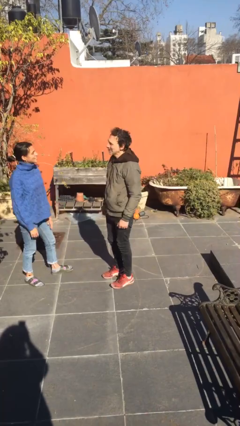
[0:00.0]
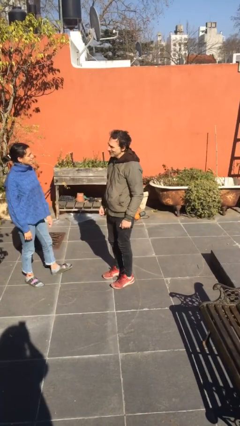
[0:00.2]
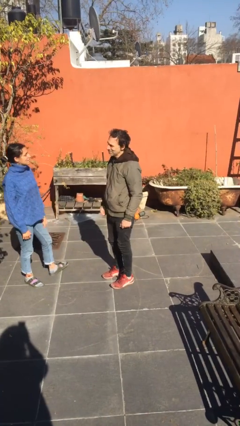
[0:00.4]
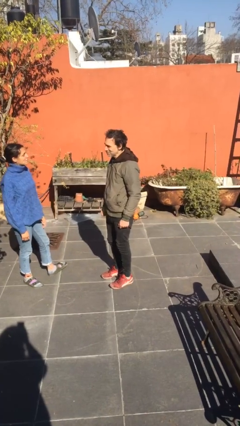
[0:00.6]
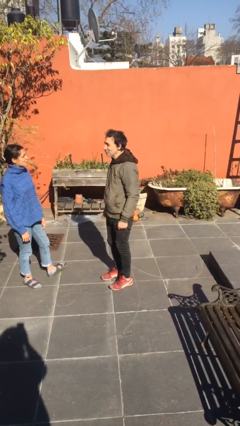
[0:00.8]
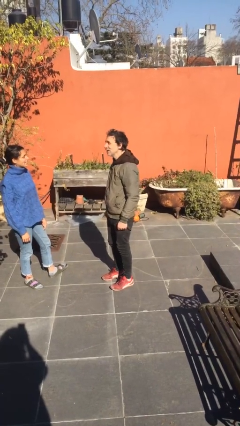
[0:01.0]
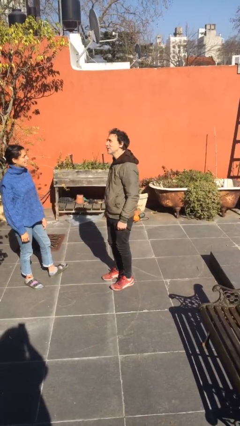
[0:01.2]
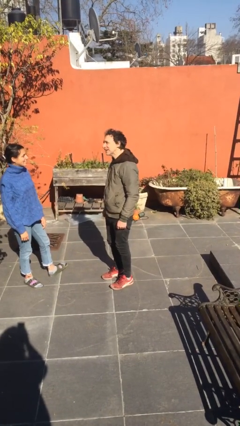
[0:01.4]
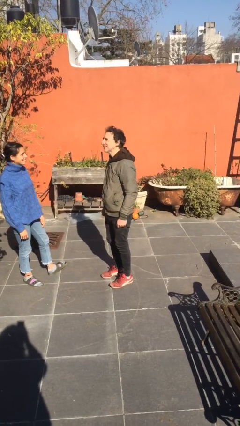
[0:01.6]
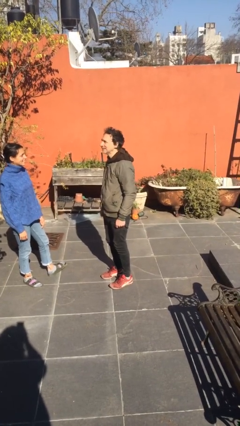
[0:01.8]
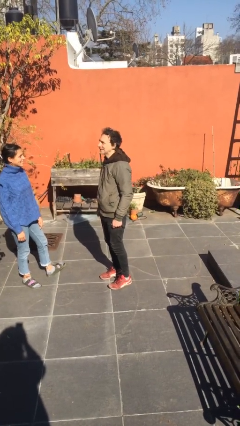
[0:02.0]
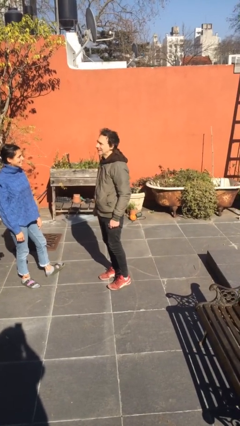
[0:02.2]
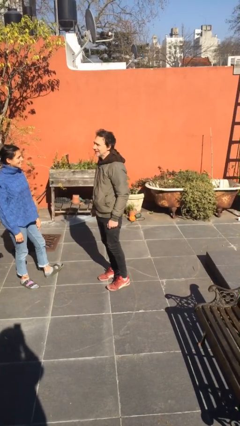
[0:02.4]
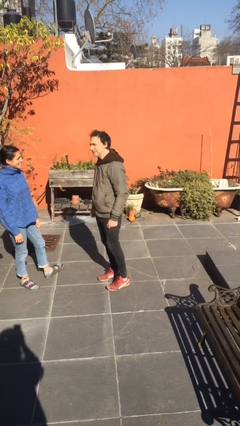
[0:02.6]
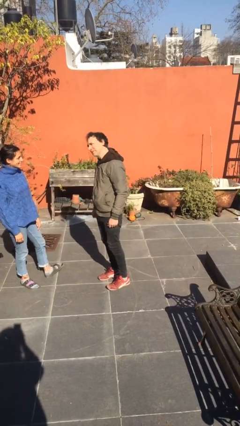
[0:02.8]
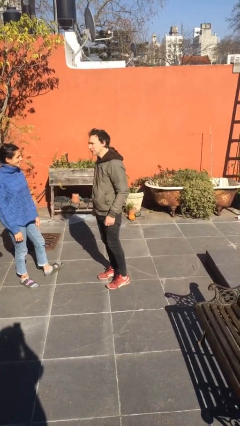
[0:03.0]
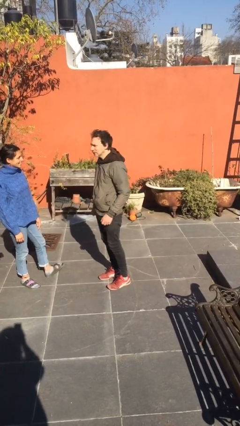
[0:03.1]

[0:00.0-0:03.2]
person talks to person

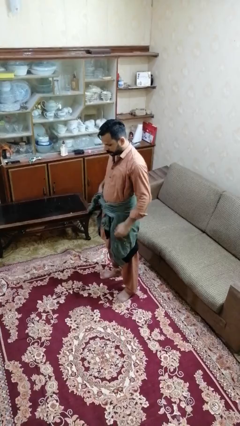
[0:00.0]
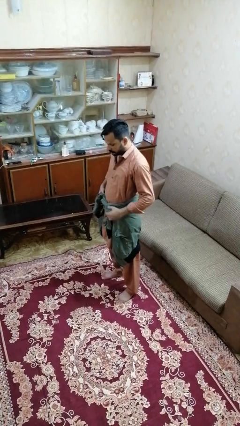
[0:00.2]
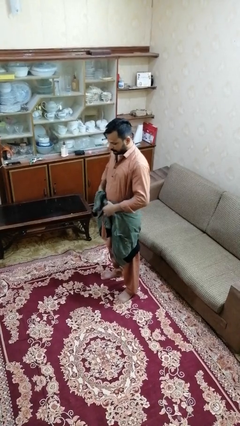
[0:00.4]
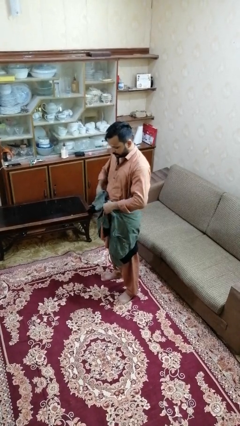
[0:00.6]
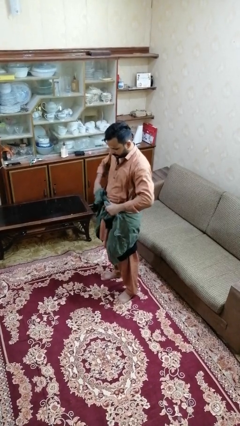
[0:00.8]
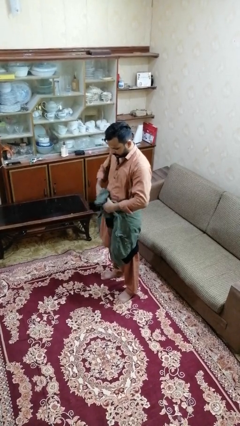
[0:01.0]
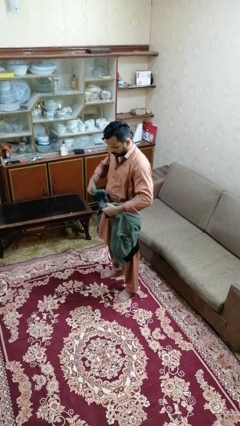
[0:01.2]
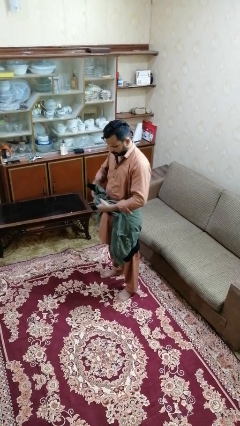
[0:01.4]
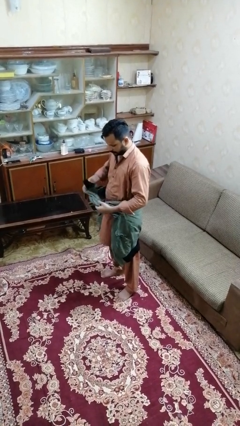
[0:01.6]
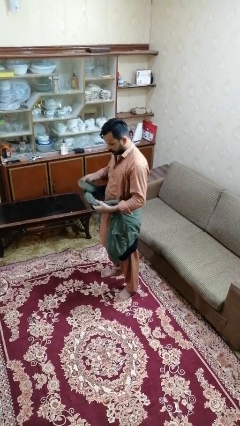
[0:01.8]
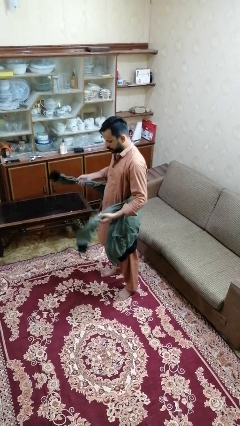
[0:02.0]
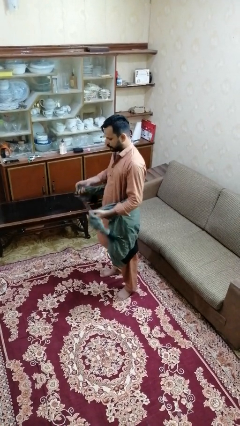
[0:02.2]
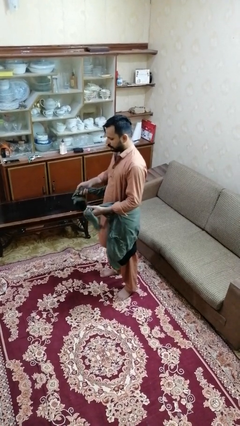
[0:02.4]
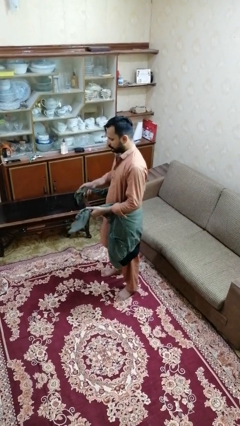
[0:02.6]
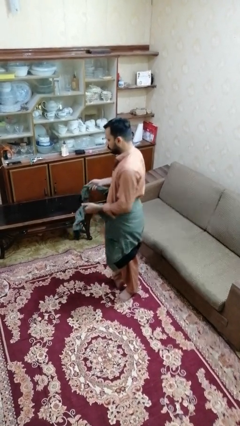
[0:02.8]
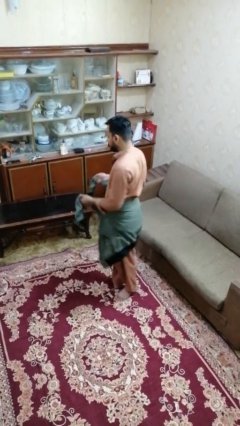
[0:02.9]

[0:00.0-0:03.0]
person unties jacket around waist

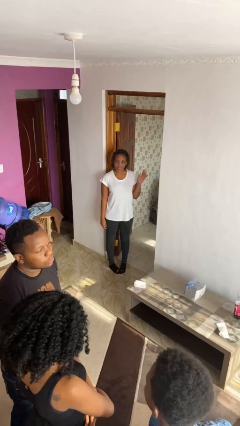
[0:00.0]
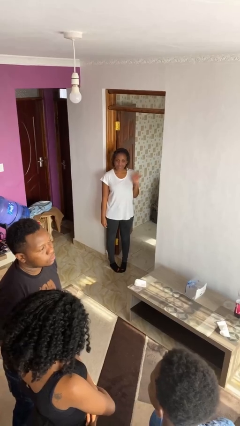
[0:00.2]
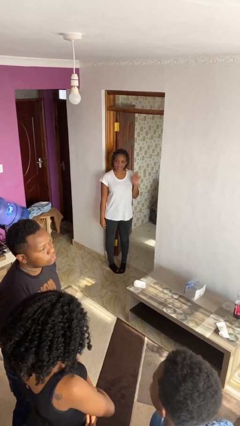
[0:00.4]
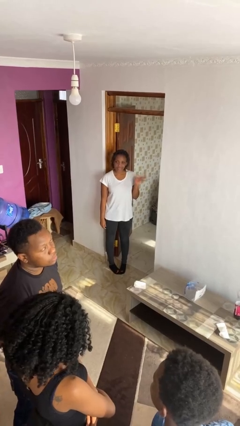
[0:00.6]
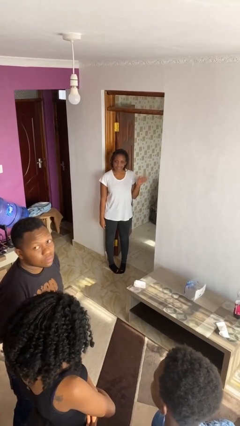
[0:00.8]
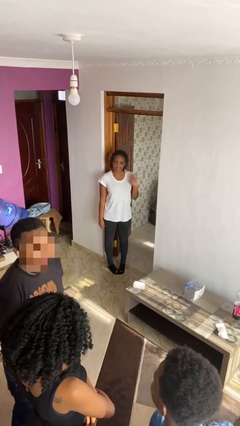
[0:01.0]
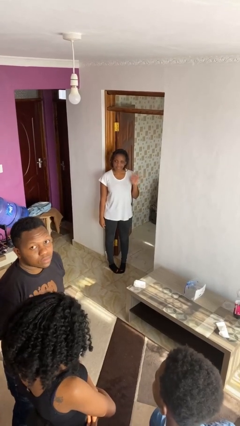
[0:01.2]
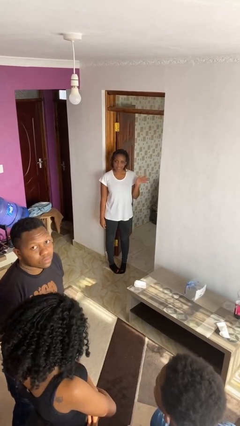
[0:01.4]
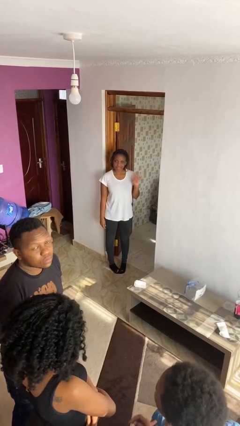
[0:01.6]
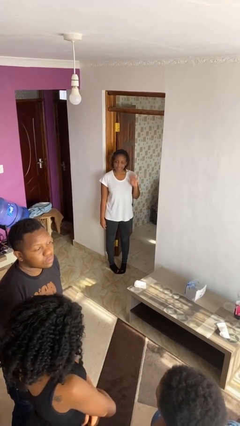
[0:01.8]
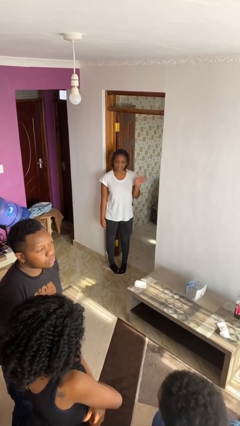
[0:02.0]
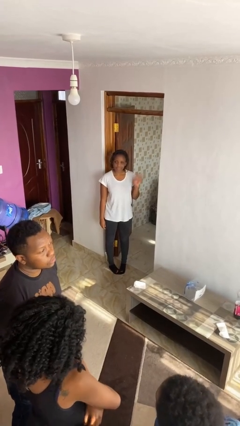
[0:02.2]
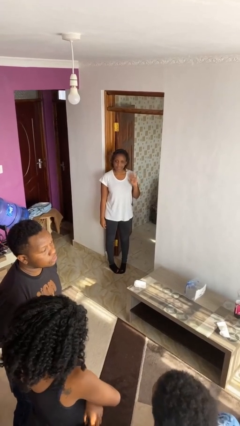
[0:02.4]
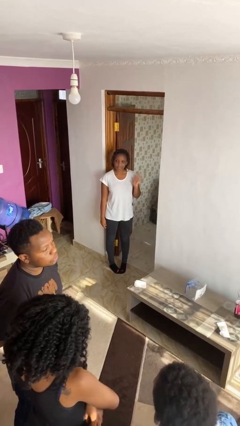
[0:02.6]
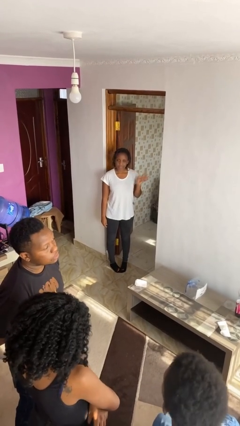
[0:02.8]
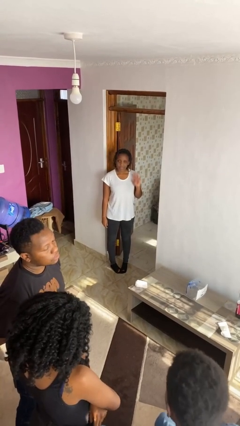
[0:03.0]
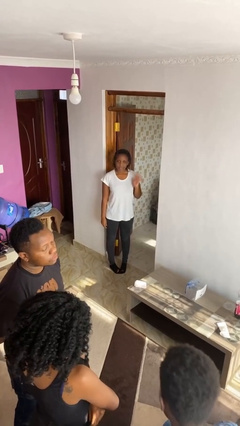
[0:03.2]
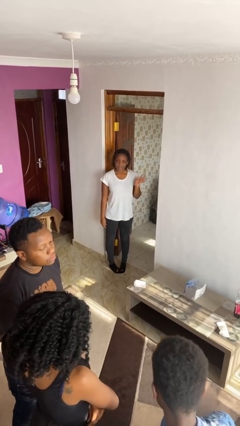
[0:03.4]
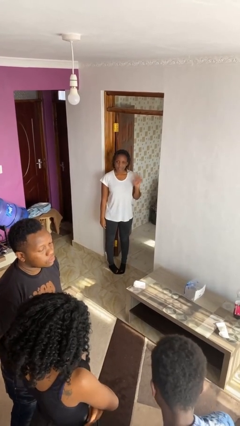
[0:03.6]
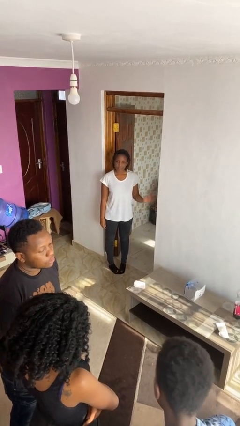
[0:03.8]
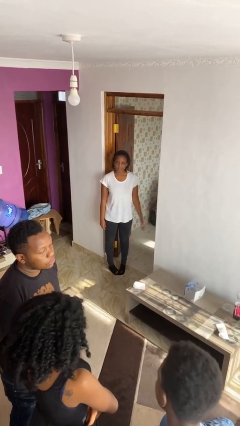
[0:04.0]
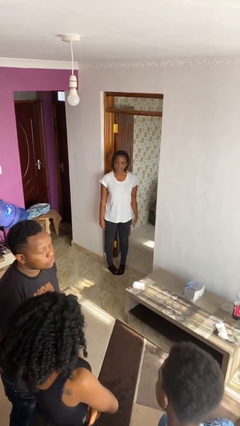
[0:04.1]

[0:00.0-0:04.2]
person waves at person

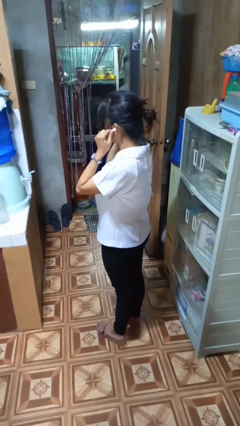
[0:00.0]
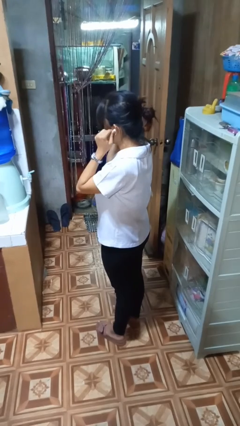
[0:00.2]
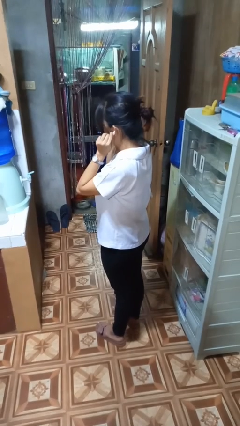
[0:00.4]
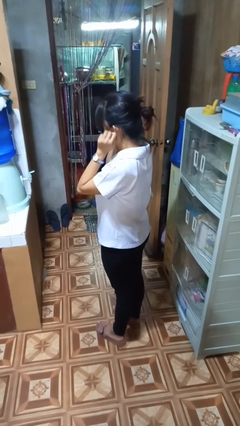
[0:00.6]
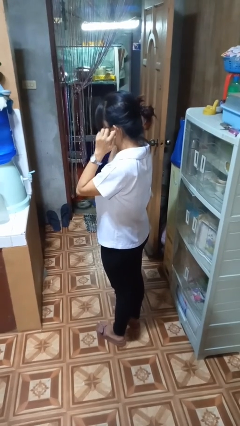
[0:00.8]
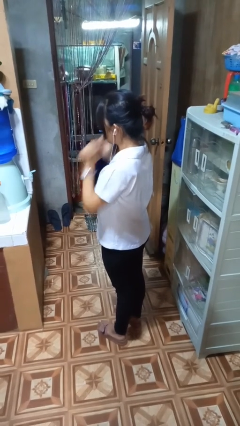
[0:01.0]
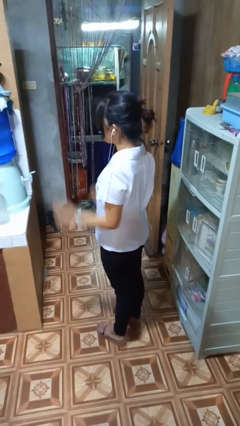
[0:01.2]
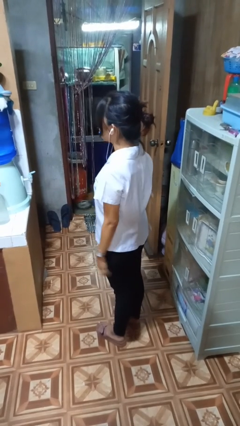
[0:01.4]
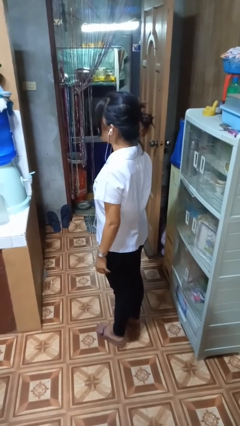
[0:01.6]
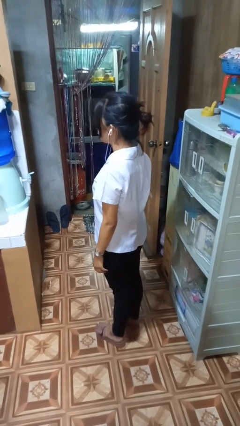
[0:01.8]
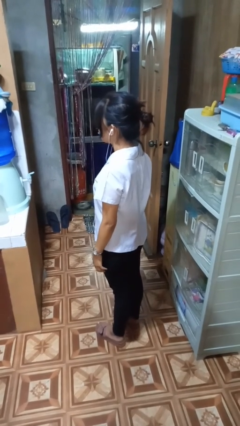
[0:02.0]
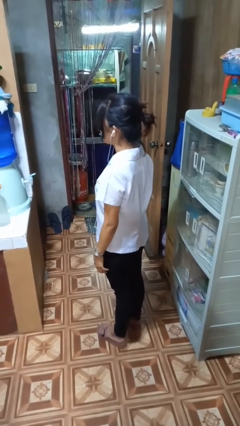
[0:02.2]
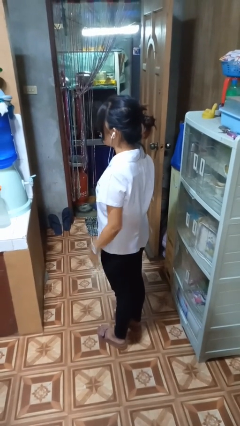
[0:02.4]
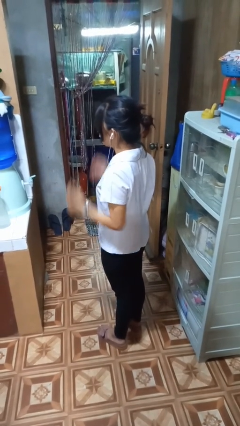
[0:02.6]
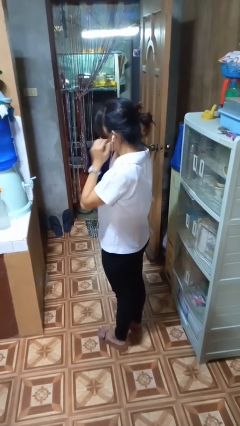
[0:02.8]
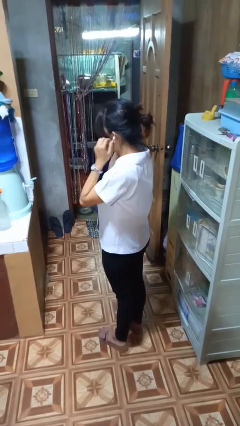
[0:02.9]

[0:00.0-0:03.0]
person puts on headphones

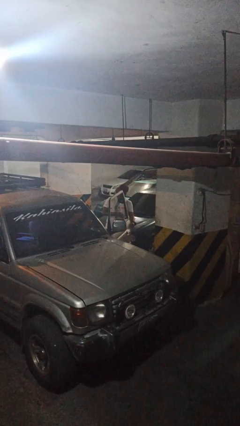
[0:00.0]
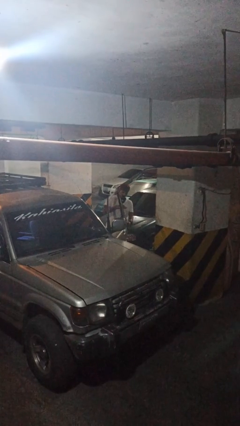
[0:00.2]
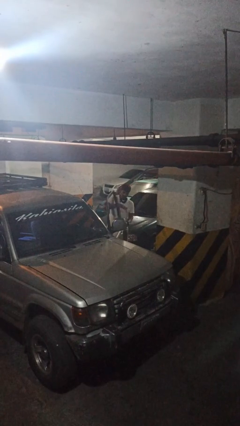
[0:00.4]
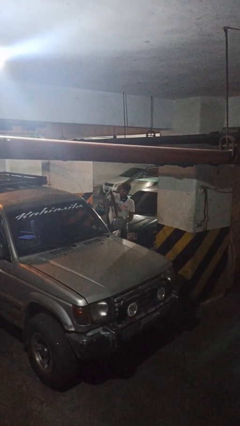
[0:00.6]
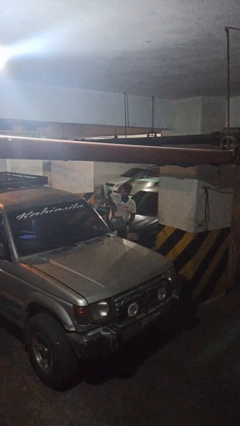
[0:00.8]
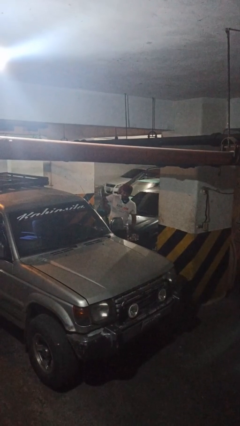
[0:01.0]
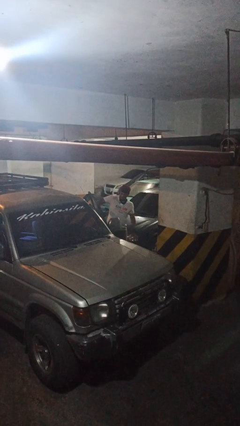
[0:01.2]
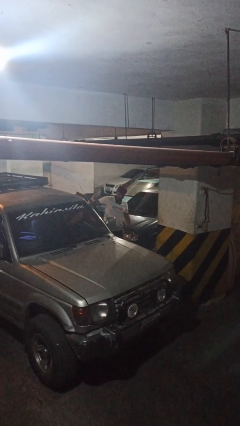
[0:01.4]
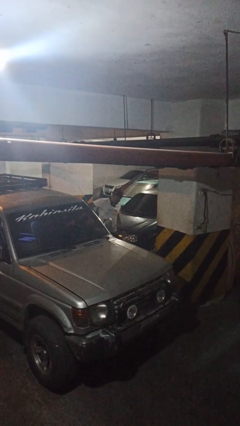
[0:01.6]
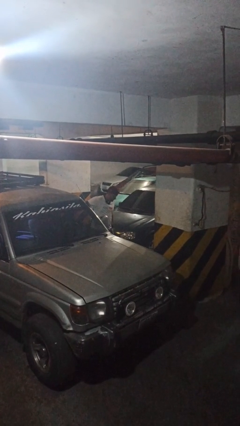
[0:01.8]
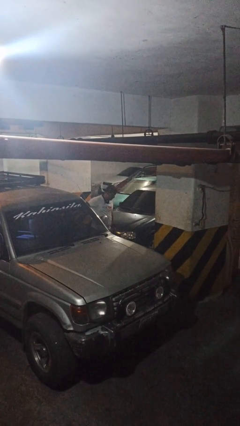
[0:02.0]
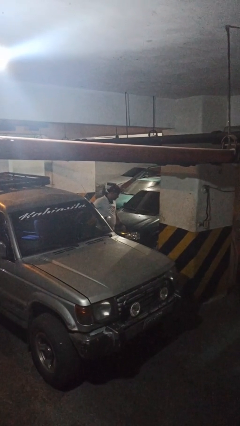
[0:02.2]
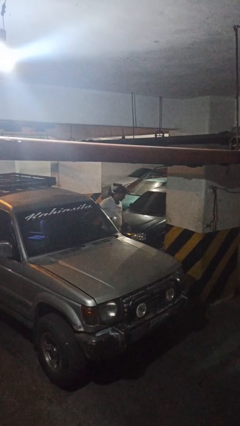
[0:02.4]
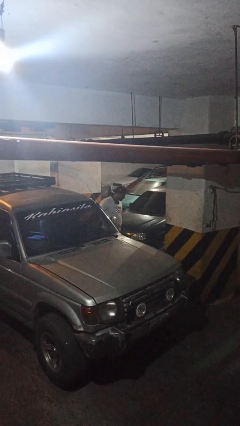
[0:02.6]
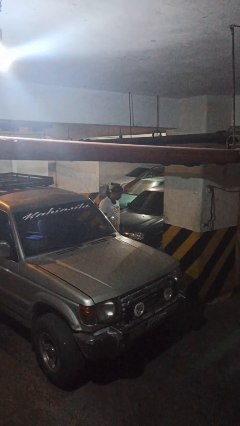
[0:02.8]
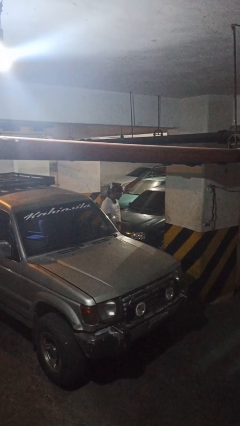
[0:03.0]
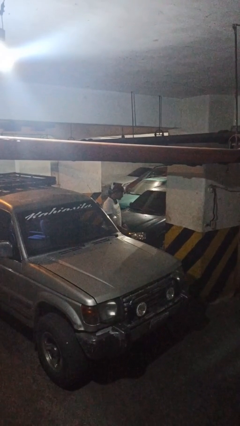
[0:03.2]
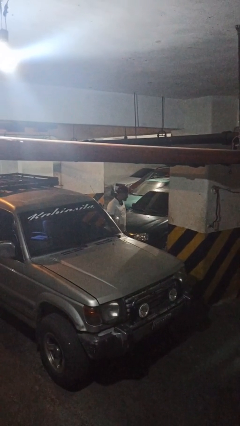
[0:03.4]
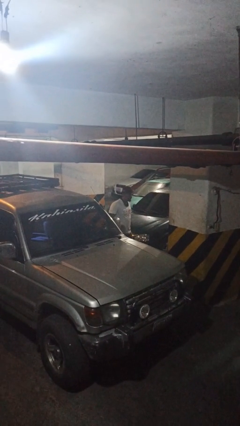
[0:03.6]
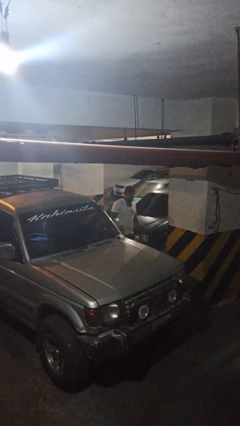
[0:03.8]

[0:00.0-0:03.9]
person closes car door

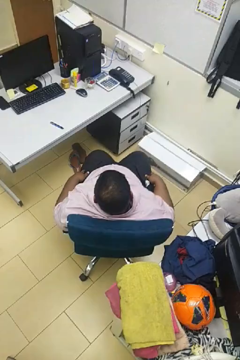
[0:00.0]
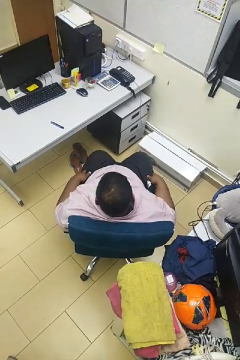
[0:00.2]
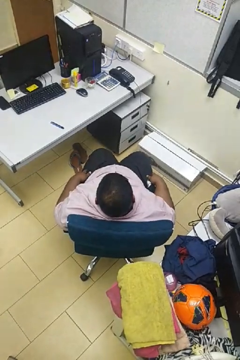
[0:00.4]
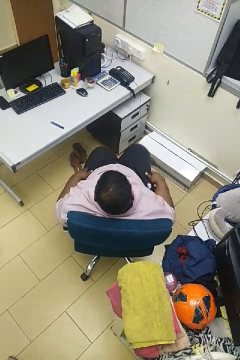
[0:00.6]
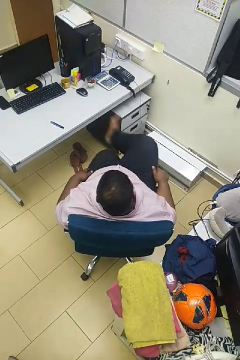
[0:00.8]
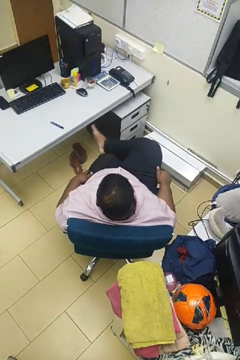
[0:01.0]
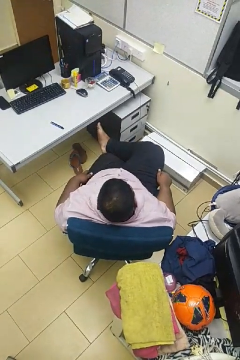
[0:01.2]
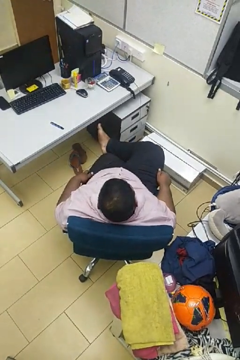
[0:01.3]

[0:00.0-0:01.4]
person crosses legs
